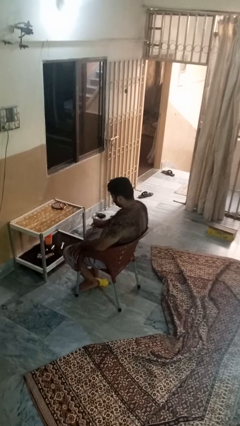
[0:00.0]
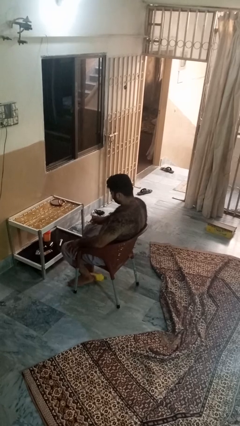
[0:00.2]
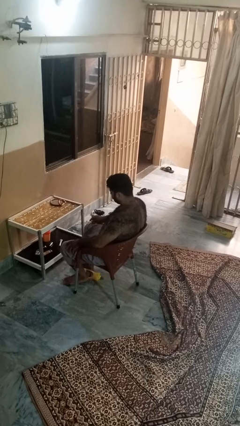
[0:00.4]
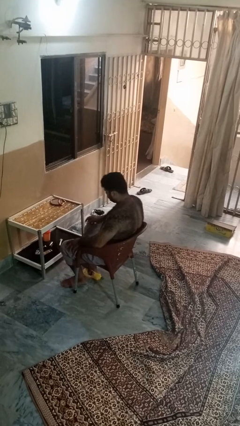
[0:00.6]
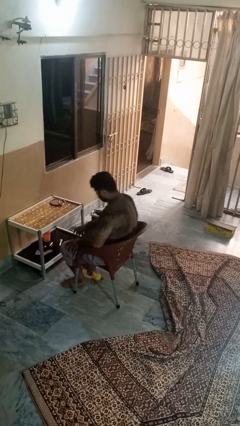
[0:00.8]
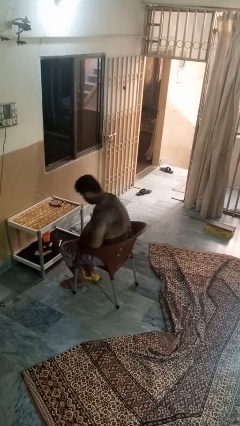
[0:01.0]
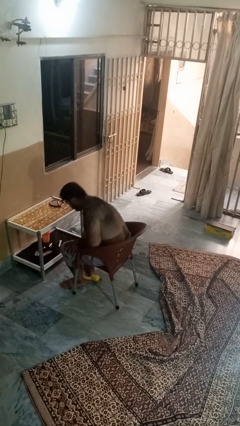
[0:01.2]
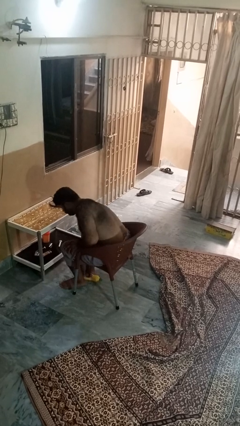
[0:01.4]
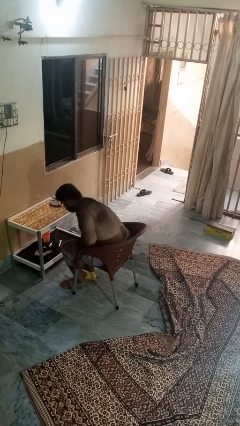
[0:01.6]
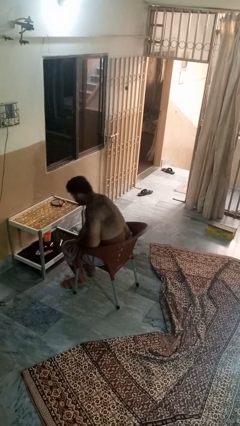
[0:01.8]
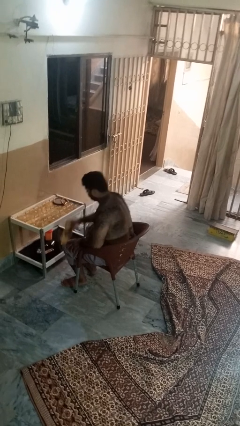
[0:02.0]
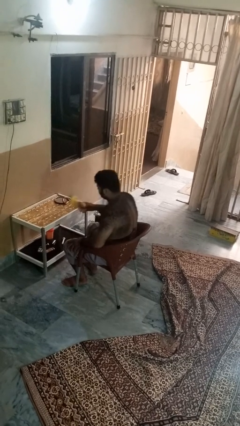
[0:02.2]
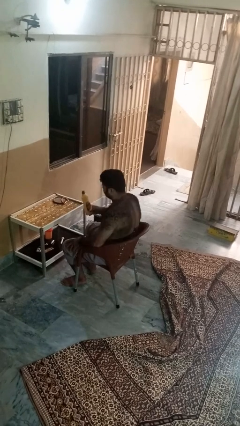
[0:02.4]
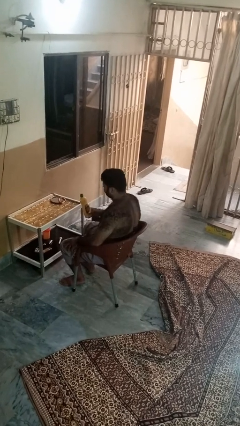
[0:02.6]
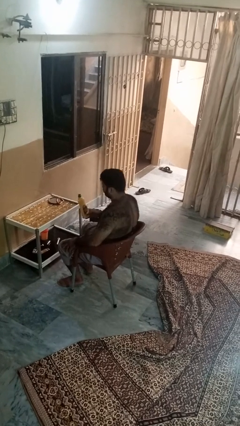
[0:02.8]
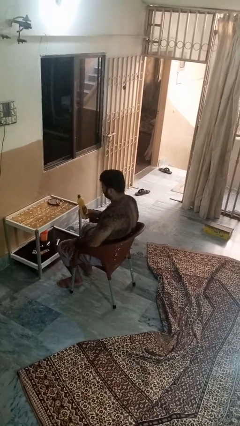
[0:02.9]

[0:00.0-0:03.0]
person picks up object from floor

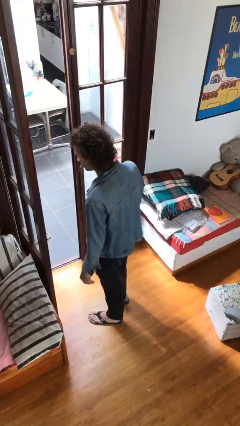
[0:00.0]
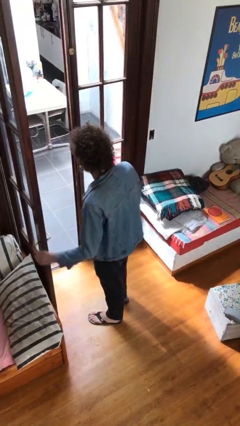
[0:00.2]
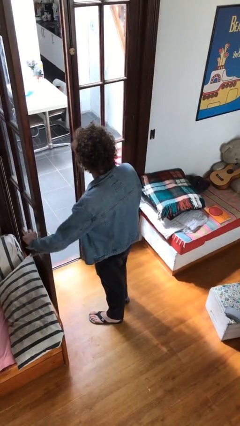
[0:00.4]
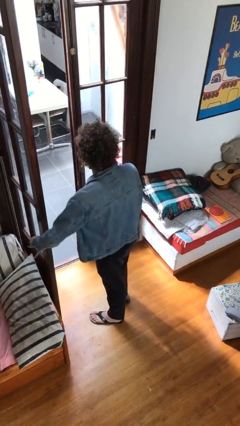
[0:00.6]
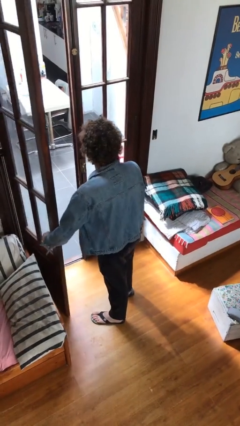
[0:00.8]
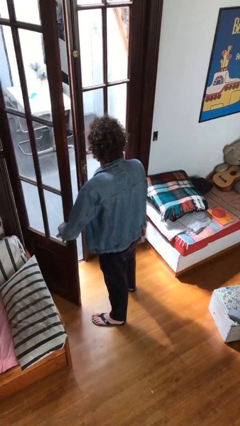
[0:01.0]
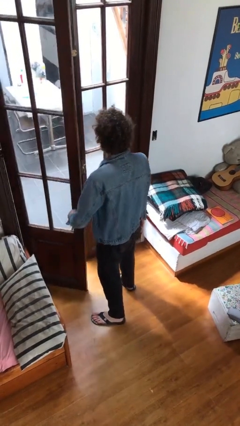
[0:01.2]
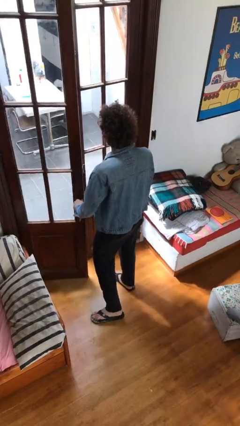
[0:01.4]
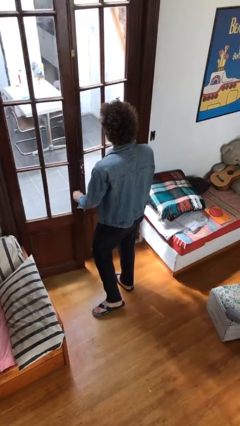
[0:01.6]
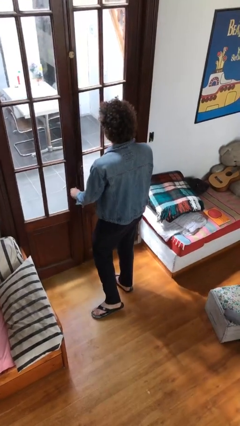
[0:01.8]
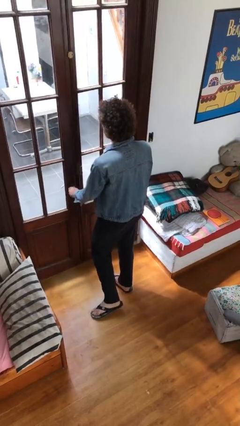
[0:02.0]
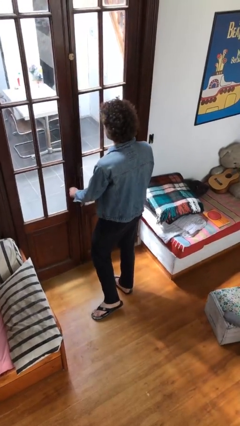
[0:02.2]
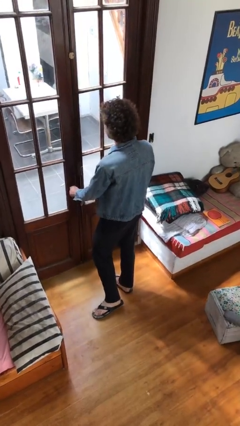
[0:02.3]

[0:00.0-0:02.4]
person closes facility door

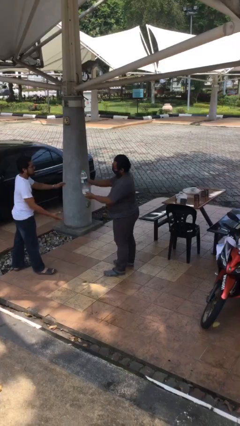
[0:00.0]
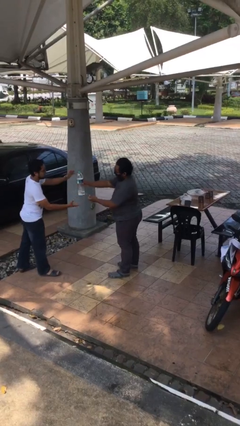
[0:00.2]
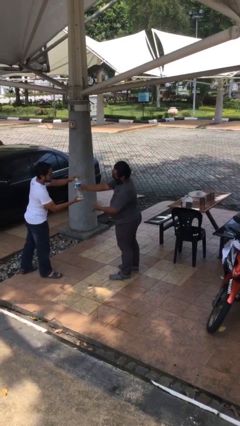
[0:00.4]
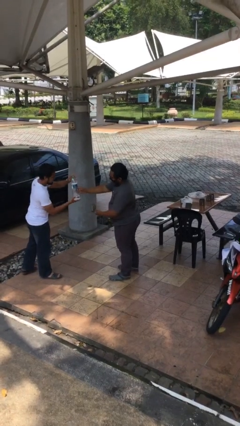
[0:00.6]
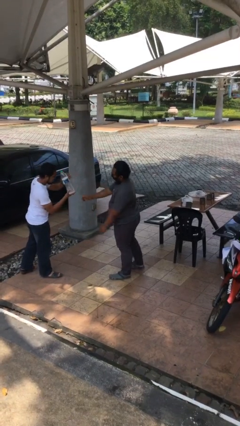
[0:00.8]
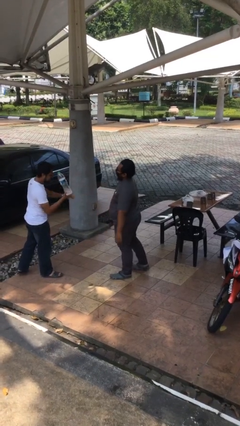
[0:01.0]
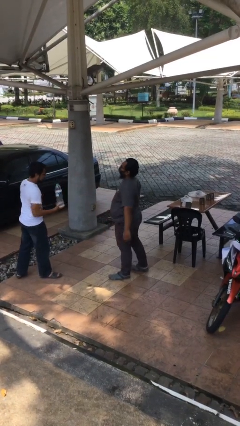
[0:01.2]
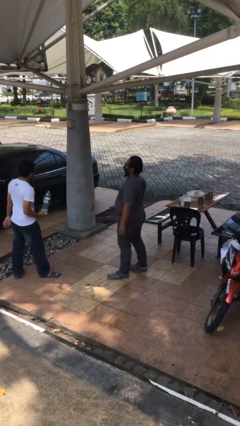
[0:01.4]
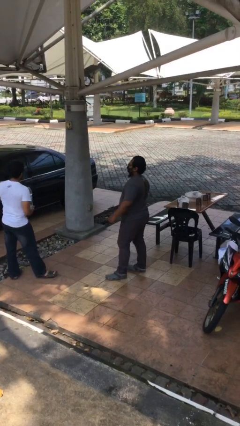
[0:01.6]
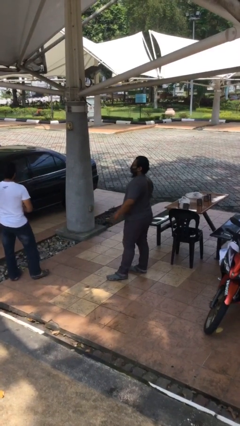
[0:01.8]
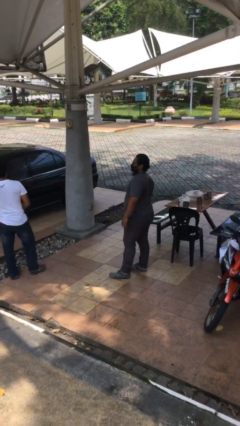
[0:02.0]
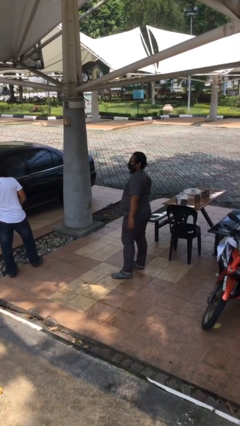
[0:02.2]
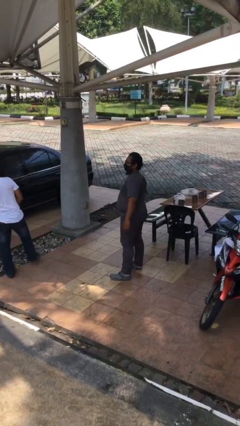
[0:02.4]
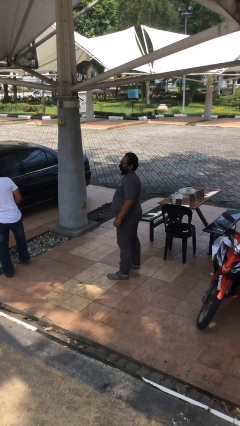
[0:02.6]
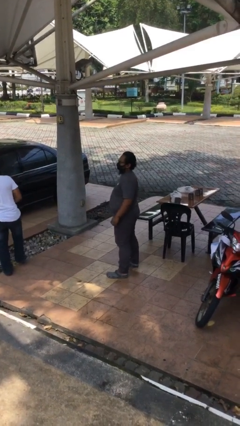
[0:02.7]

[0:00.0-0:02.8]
person transfers object to person

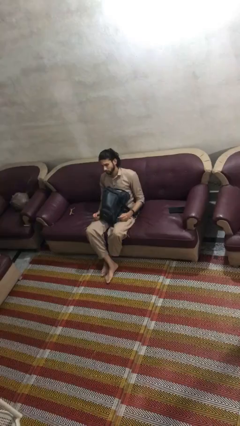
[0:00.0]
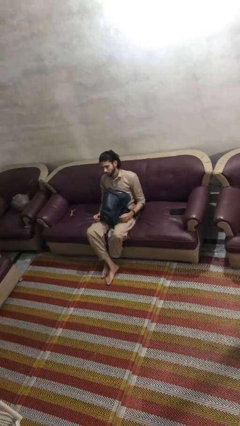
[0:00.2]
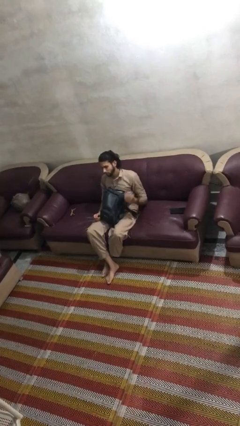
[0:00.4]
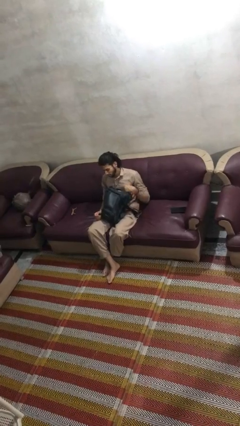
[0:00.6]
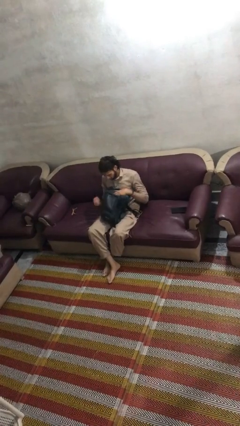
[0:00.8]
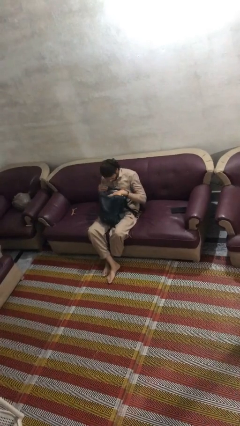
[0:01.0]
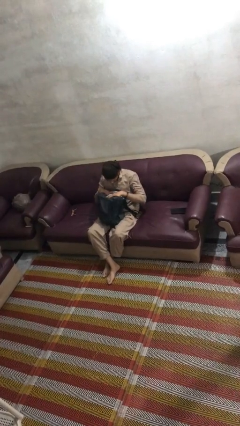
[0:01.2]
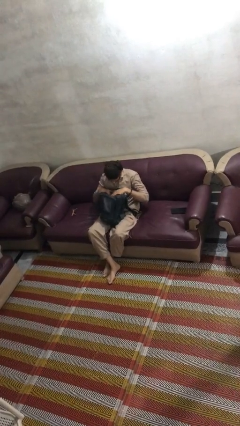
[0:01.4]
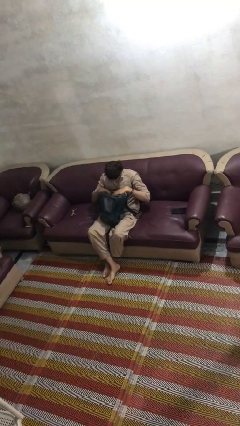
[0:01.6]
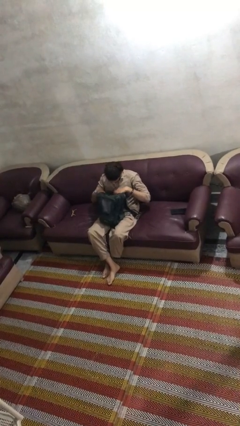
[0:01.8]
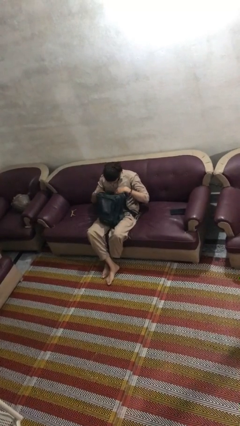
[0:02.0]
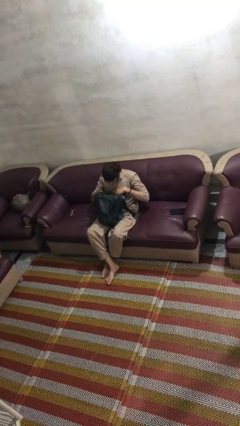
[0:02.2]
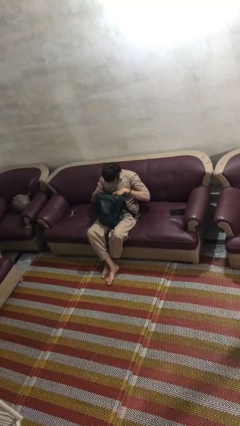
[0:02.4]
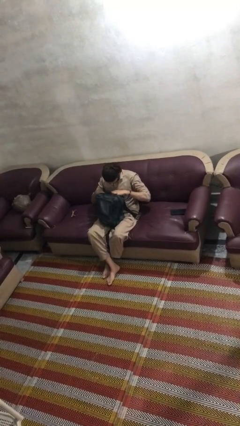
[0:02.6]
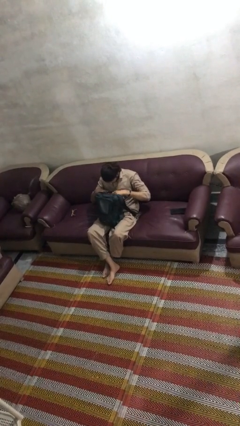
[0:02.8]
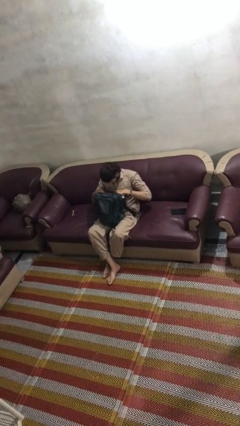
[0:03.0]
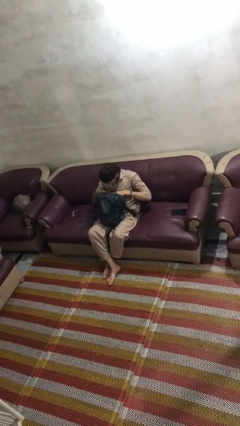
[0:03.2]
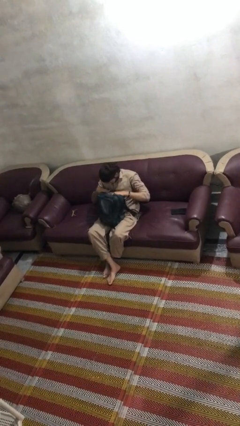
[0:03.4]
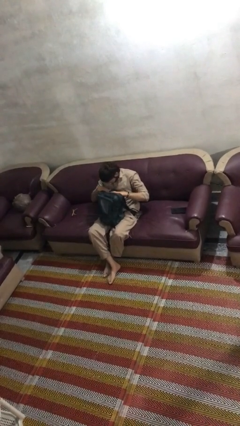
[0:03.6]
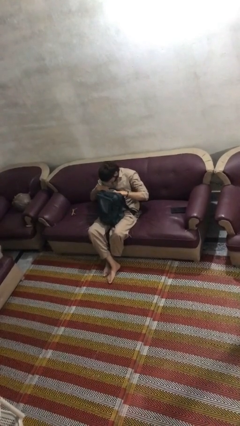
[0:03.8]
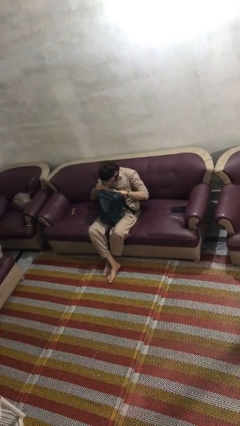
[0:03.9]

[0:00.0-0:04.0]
person searches in backpack

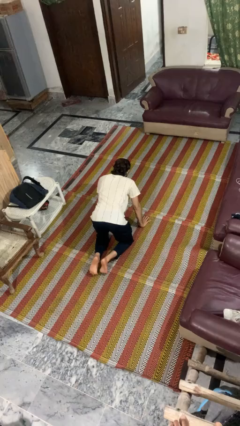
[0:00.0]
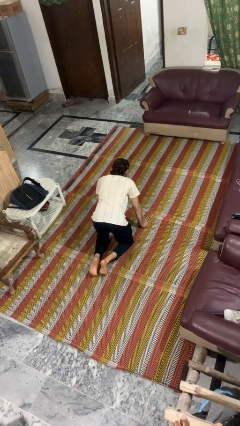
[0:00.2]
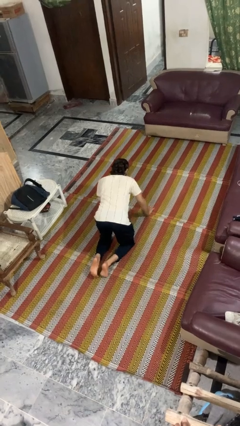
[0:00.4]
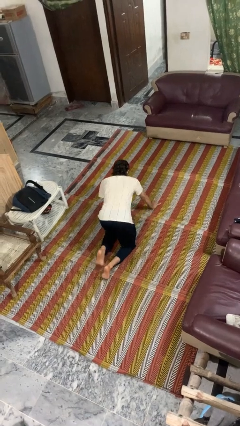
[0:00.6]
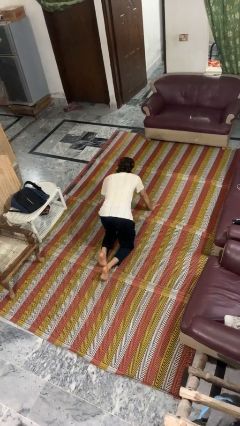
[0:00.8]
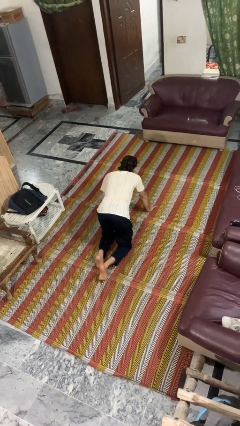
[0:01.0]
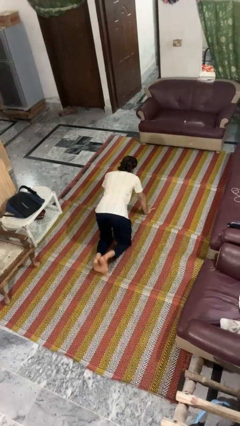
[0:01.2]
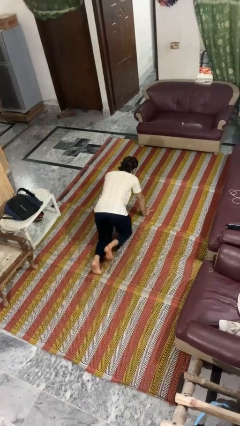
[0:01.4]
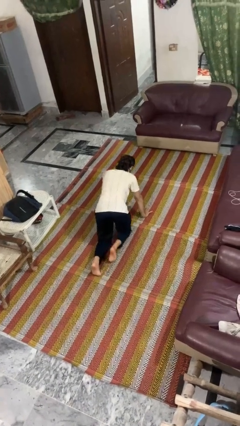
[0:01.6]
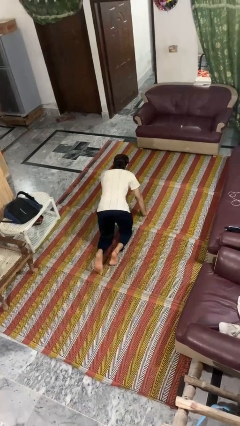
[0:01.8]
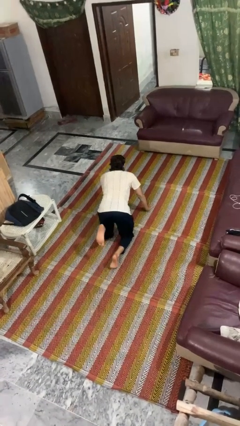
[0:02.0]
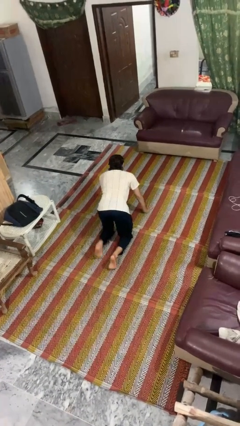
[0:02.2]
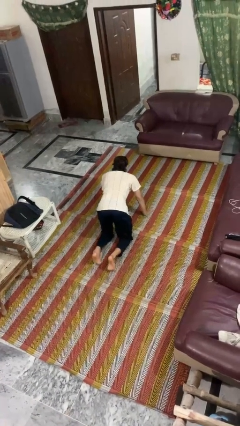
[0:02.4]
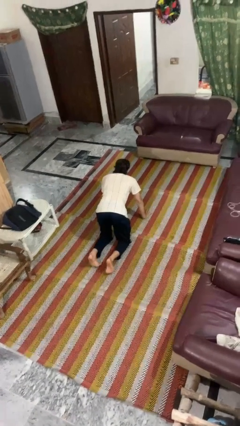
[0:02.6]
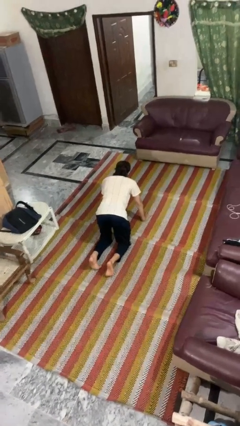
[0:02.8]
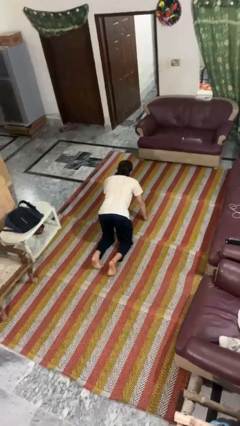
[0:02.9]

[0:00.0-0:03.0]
person crawls

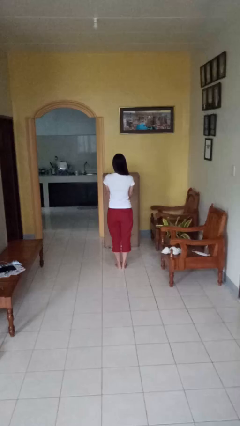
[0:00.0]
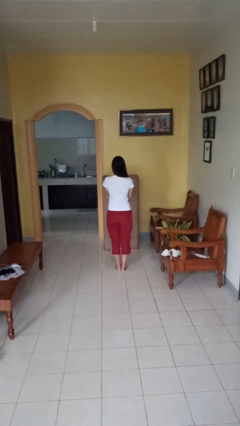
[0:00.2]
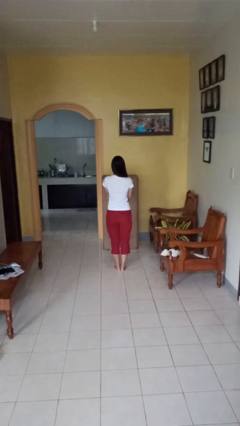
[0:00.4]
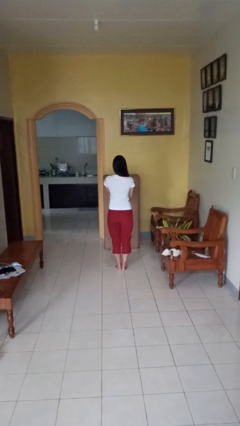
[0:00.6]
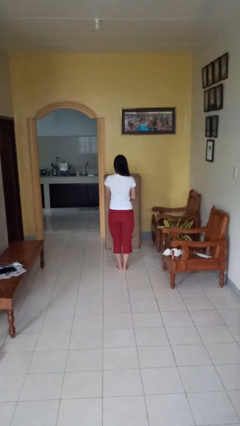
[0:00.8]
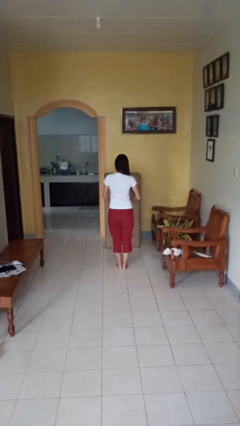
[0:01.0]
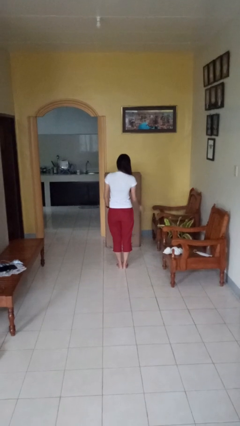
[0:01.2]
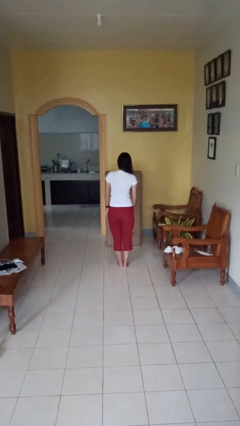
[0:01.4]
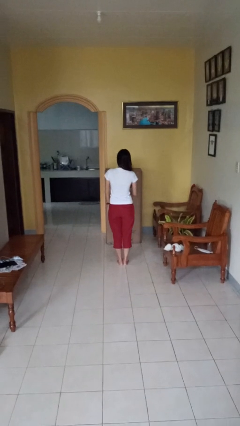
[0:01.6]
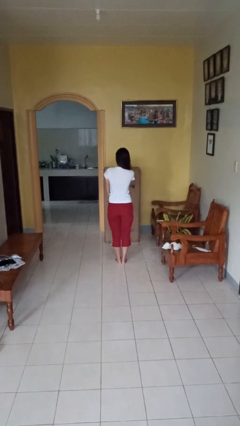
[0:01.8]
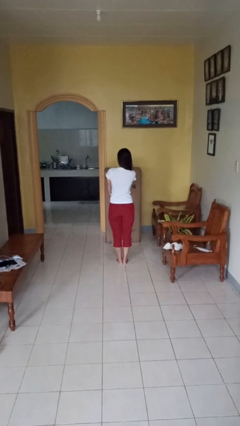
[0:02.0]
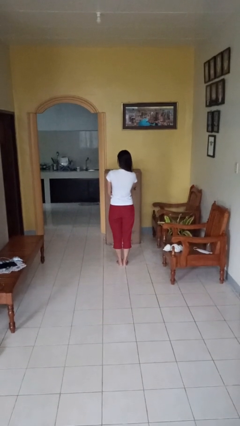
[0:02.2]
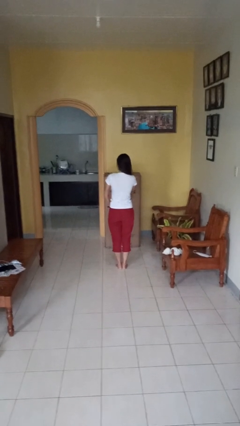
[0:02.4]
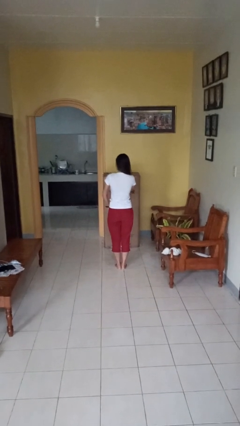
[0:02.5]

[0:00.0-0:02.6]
person swats bug
